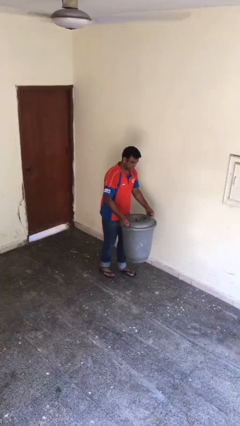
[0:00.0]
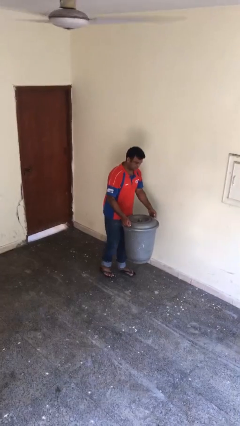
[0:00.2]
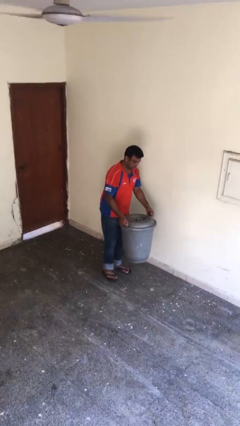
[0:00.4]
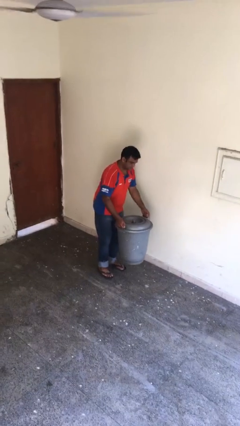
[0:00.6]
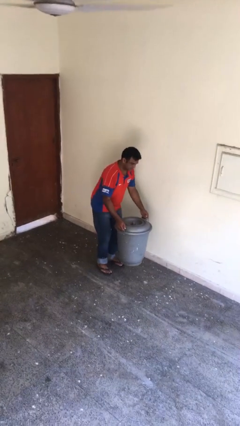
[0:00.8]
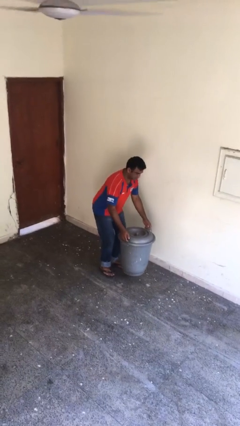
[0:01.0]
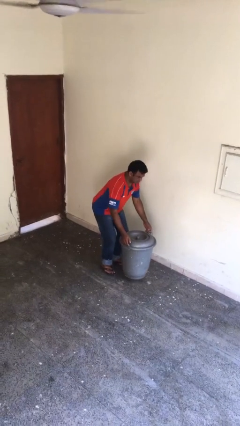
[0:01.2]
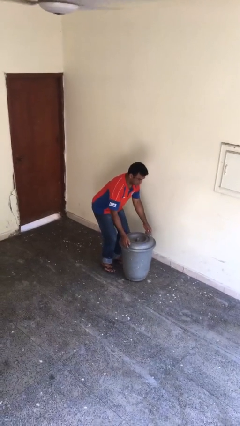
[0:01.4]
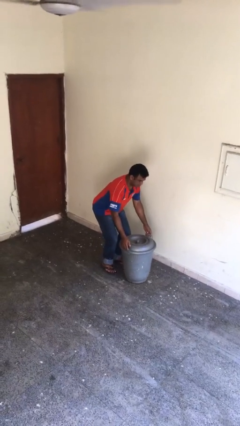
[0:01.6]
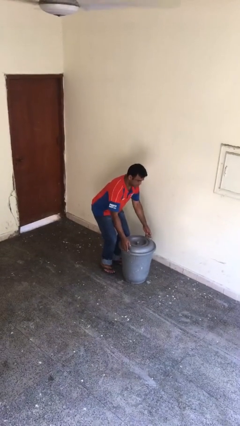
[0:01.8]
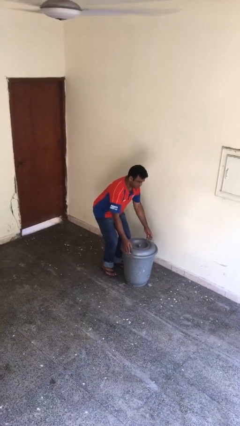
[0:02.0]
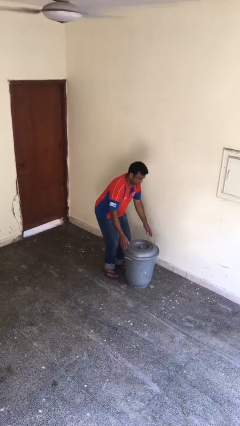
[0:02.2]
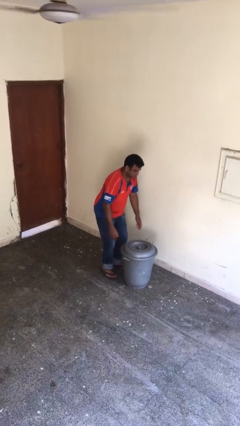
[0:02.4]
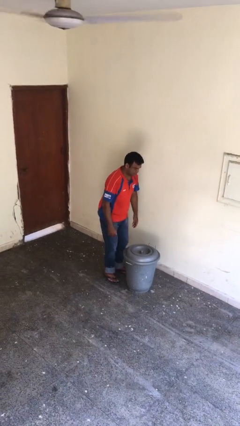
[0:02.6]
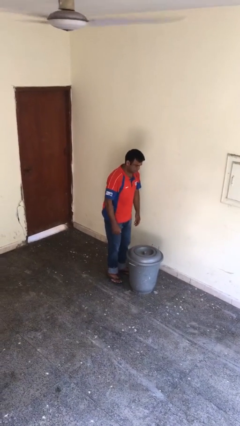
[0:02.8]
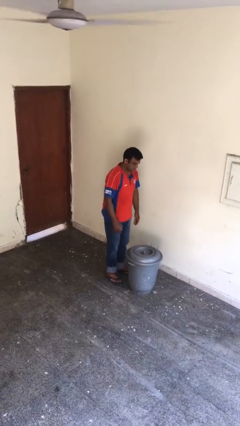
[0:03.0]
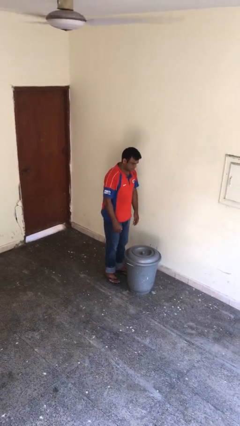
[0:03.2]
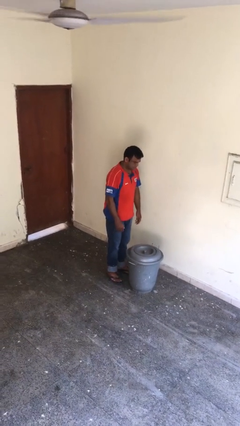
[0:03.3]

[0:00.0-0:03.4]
person puts down object on floor

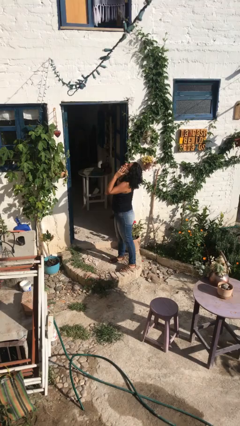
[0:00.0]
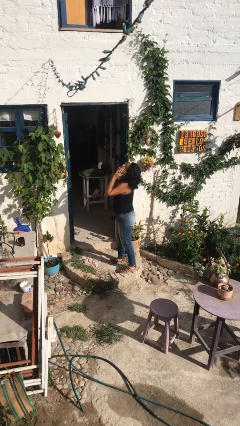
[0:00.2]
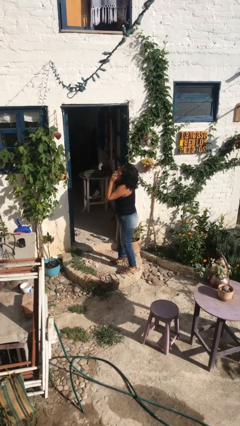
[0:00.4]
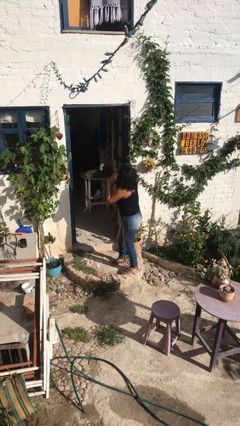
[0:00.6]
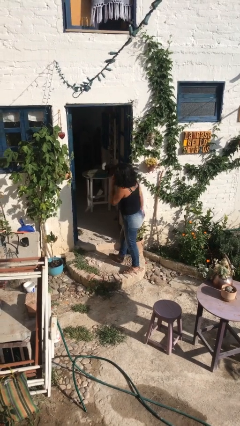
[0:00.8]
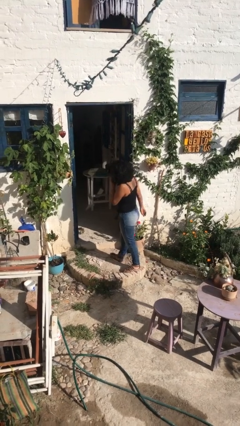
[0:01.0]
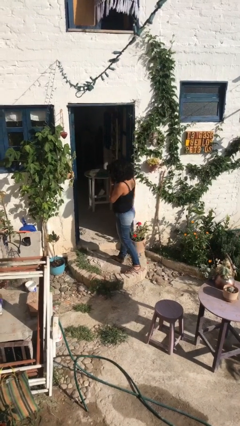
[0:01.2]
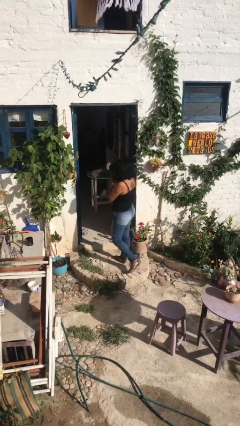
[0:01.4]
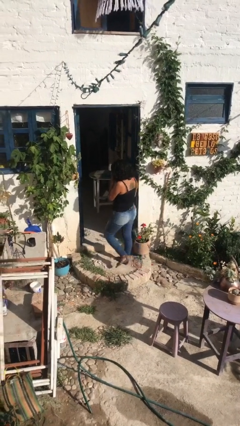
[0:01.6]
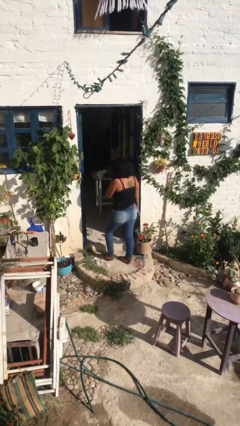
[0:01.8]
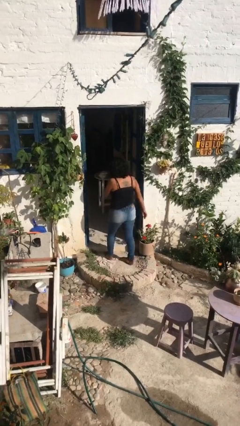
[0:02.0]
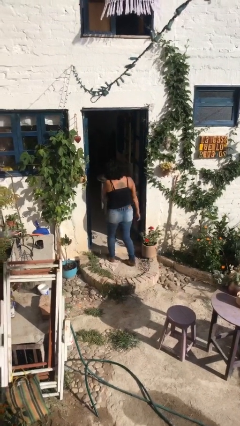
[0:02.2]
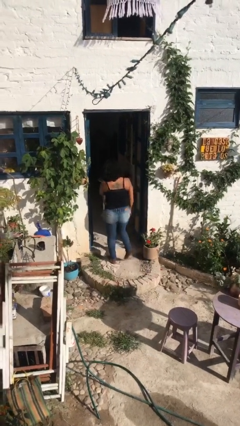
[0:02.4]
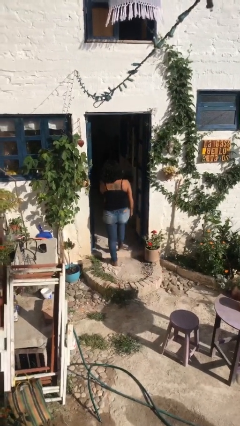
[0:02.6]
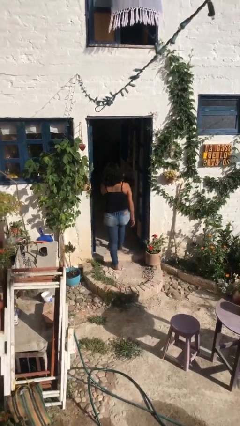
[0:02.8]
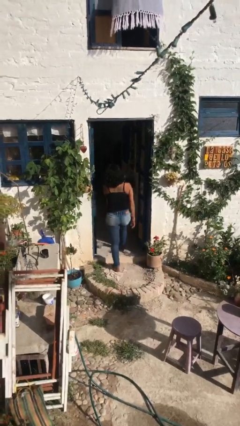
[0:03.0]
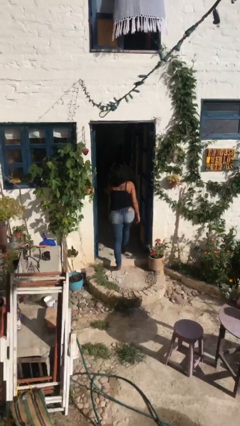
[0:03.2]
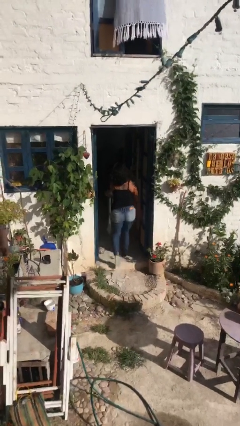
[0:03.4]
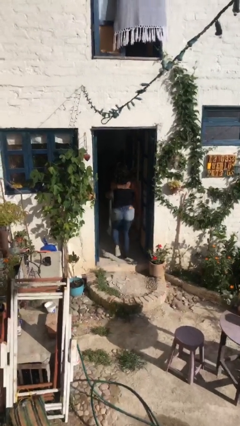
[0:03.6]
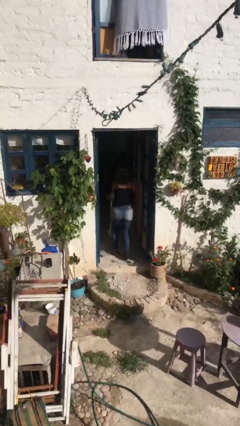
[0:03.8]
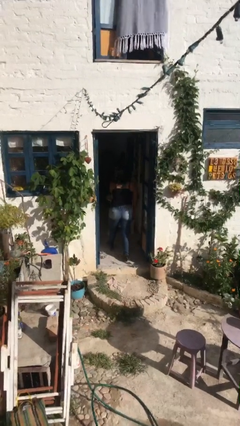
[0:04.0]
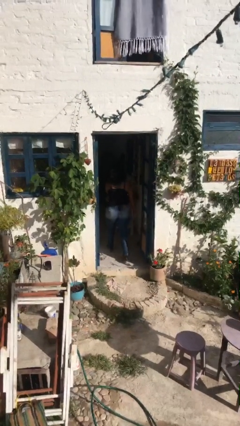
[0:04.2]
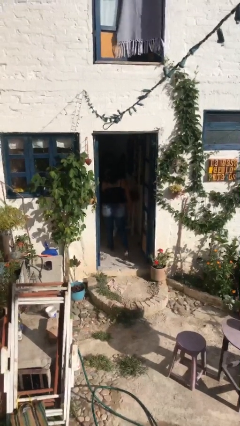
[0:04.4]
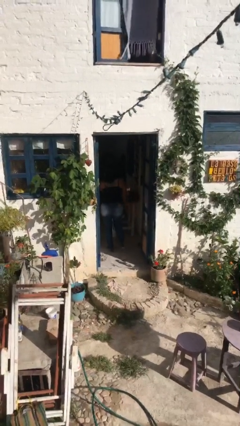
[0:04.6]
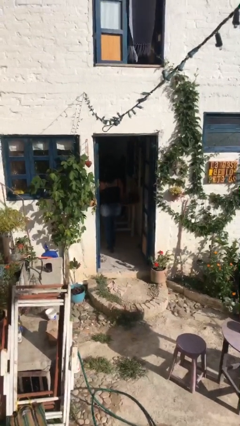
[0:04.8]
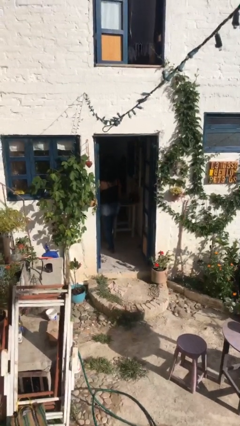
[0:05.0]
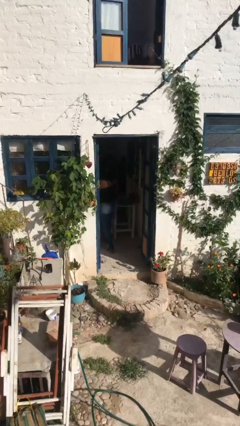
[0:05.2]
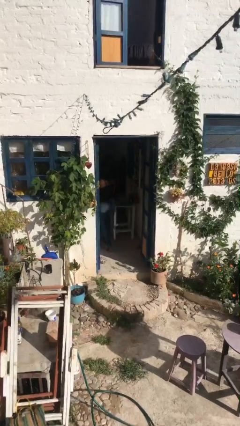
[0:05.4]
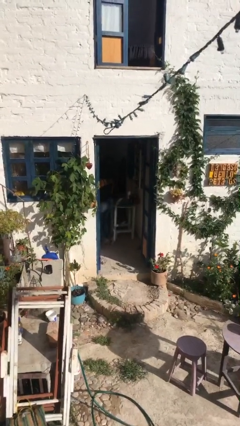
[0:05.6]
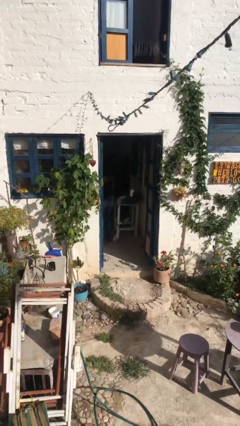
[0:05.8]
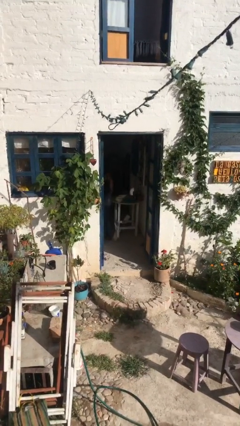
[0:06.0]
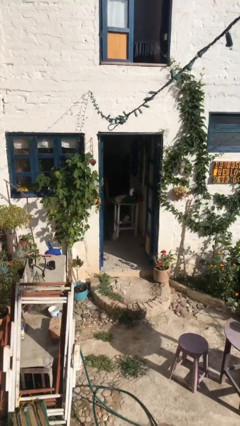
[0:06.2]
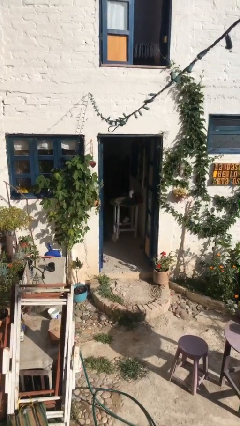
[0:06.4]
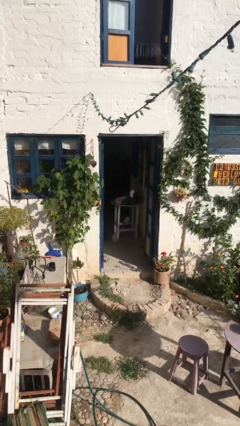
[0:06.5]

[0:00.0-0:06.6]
person exits scene through structure

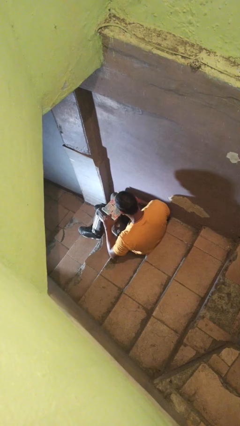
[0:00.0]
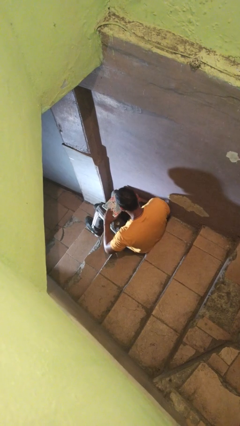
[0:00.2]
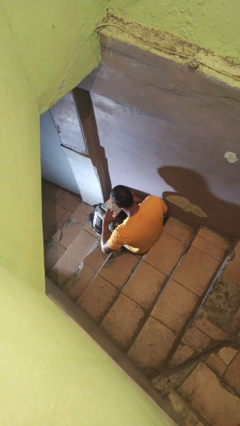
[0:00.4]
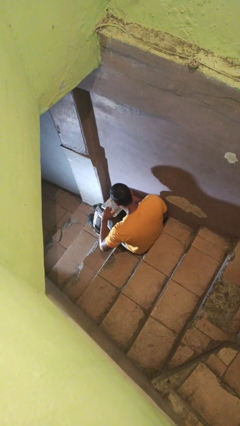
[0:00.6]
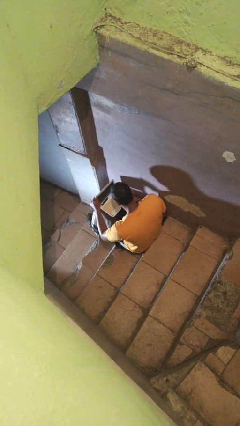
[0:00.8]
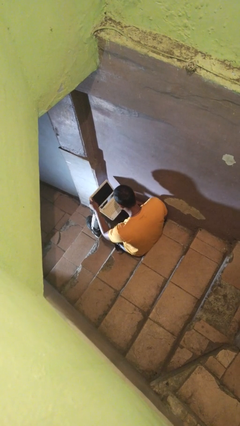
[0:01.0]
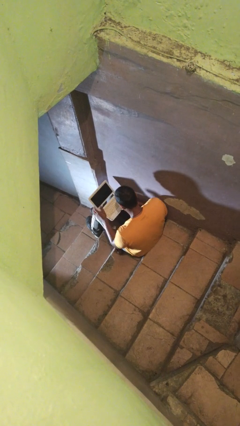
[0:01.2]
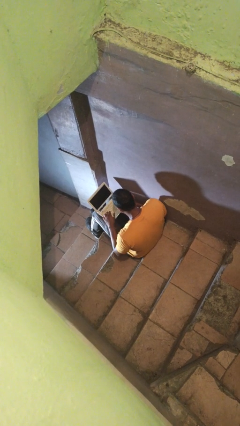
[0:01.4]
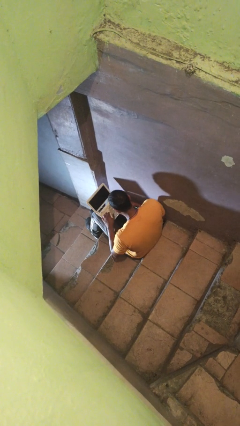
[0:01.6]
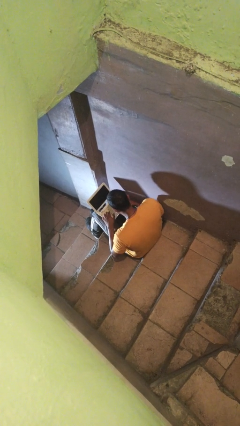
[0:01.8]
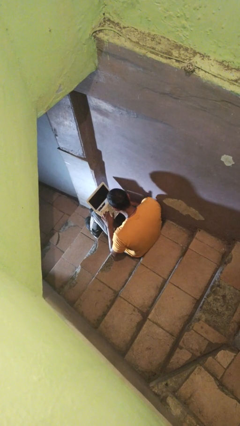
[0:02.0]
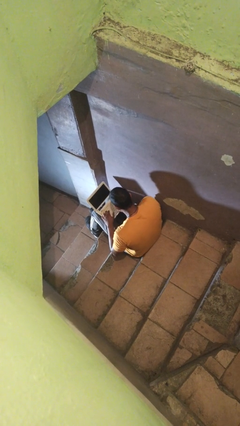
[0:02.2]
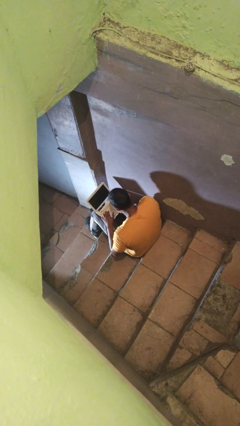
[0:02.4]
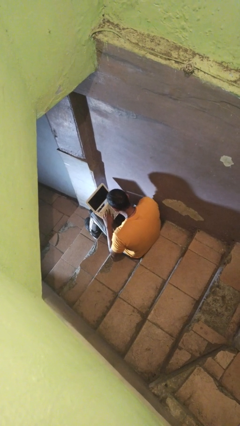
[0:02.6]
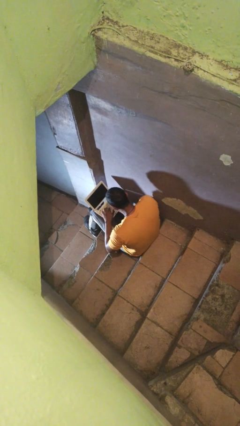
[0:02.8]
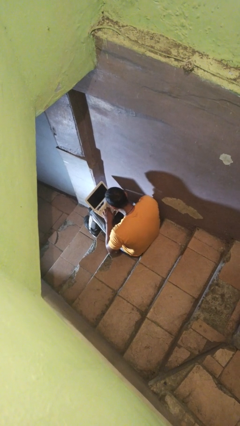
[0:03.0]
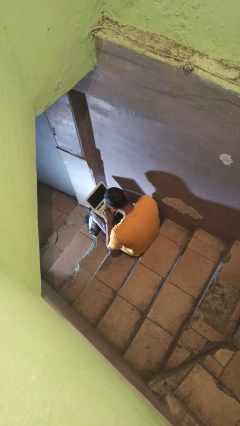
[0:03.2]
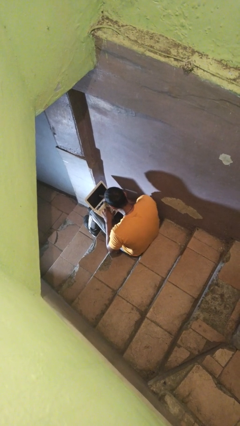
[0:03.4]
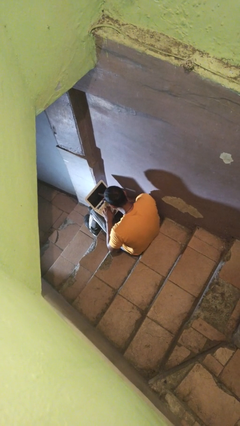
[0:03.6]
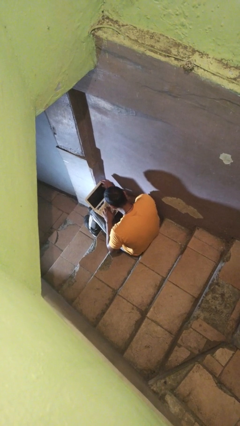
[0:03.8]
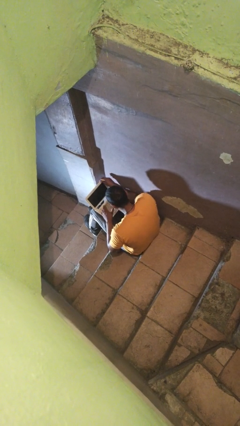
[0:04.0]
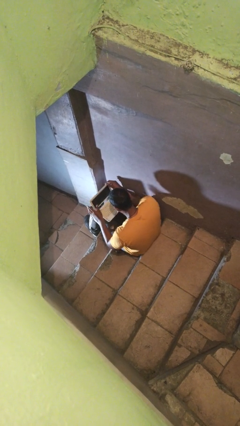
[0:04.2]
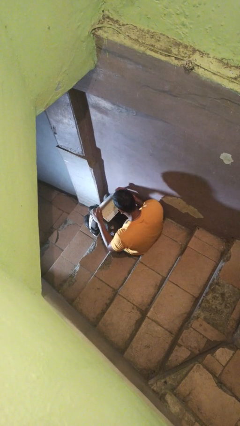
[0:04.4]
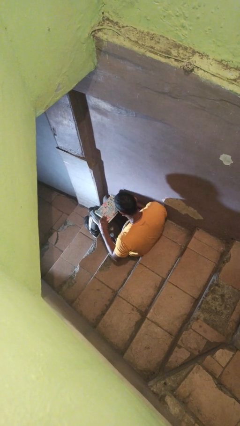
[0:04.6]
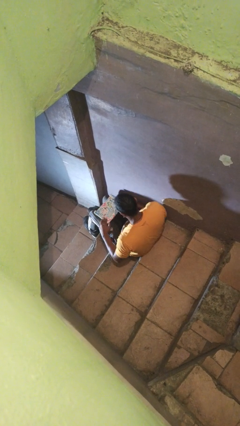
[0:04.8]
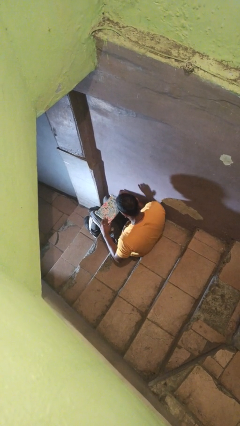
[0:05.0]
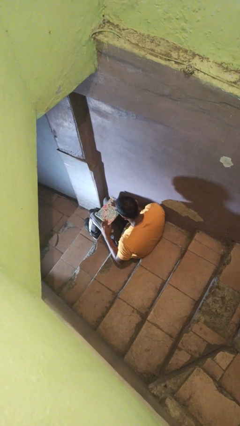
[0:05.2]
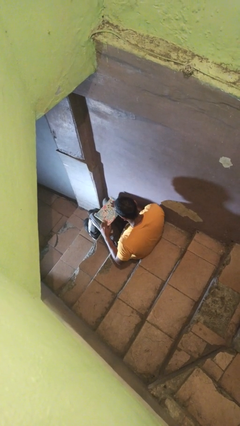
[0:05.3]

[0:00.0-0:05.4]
person interacts with laptop

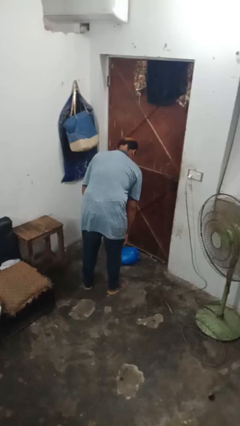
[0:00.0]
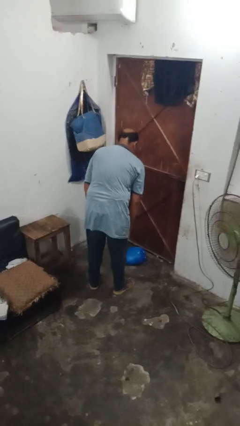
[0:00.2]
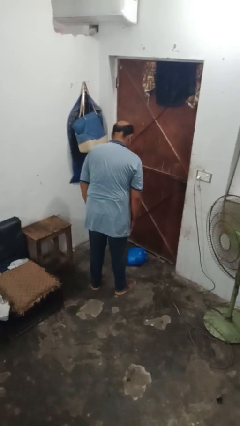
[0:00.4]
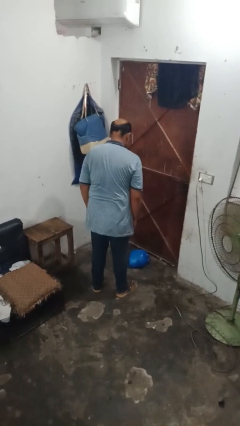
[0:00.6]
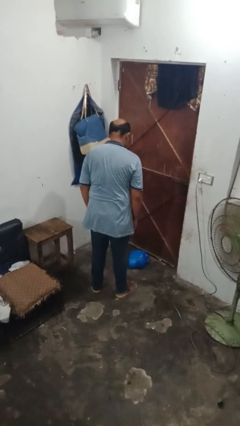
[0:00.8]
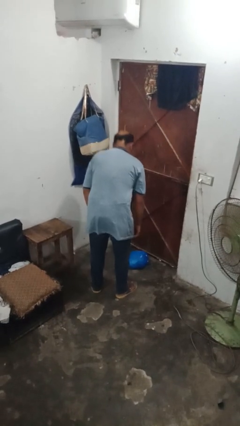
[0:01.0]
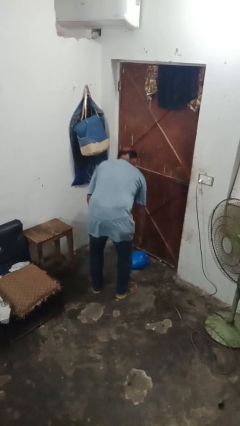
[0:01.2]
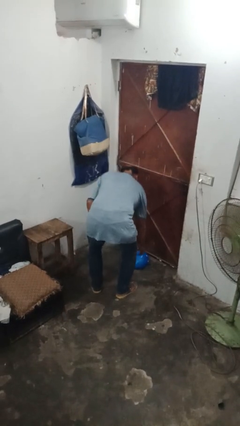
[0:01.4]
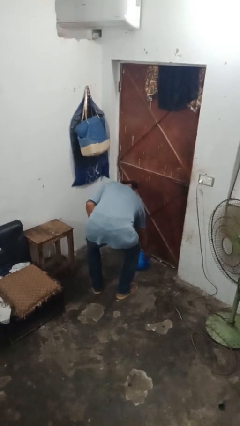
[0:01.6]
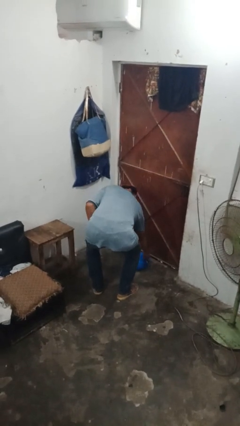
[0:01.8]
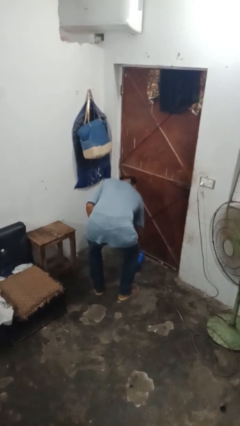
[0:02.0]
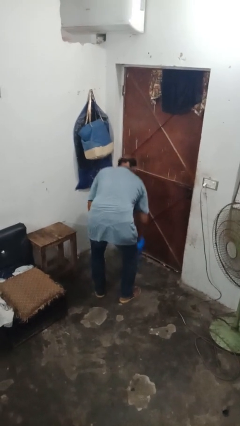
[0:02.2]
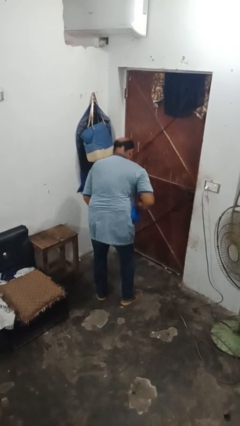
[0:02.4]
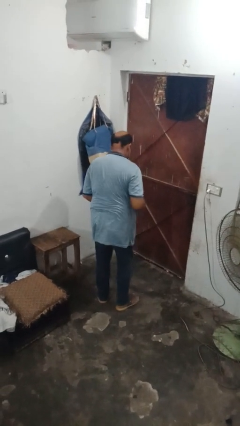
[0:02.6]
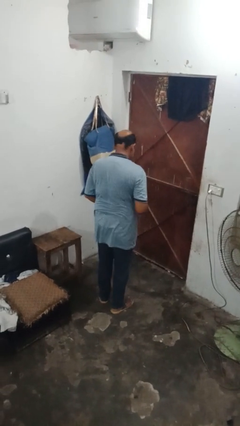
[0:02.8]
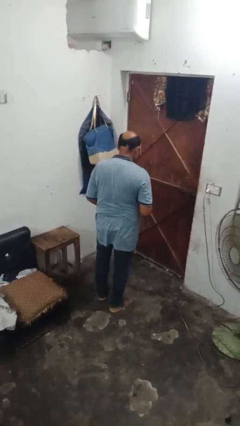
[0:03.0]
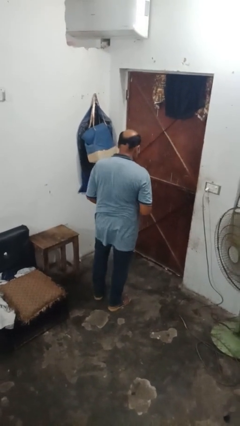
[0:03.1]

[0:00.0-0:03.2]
person picks up object from floor
